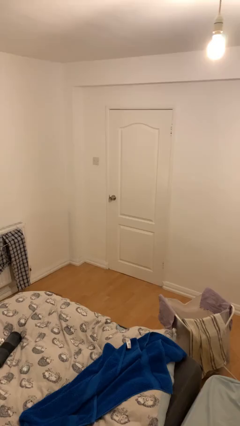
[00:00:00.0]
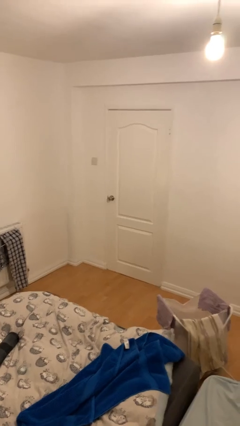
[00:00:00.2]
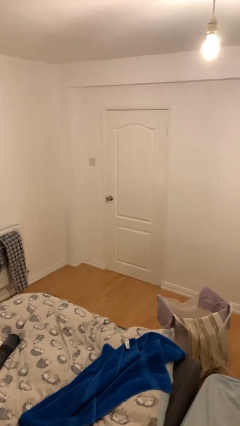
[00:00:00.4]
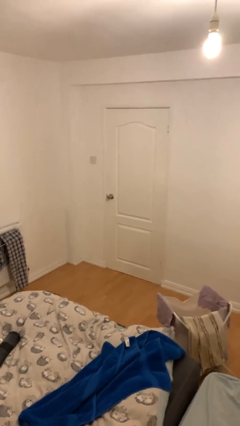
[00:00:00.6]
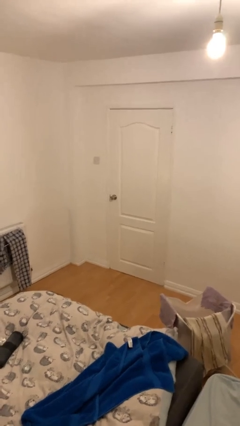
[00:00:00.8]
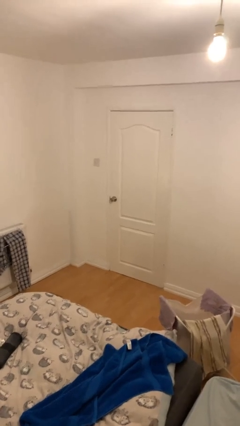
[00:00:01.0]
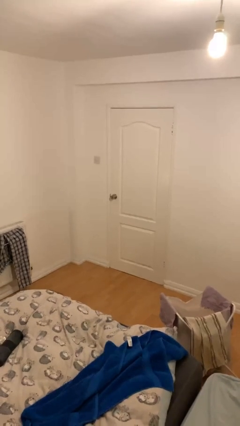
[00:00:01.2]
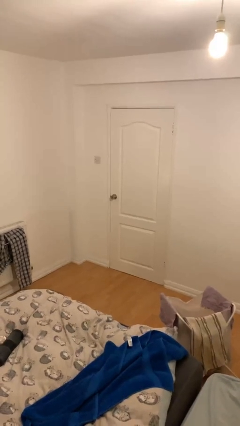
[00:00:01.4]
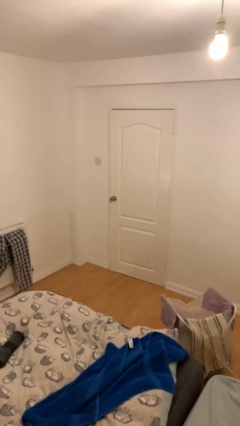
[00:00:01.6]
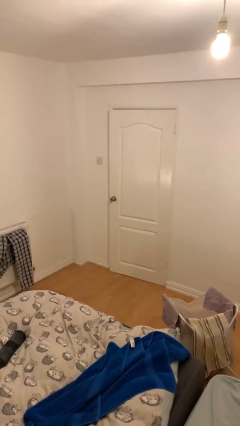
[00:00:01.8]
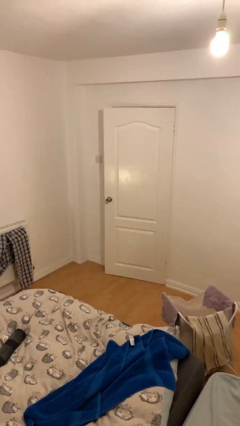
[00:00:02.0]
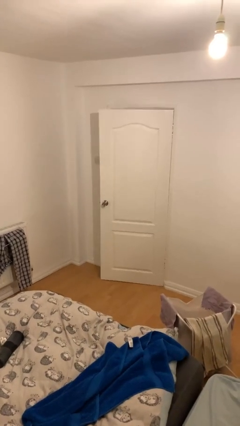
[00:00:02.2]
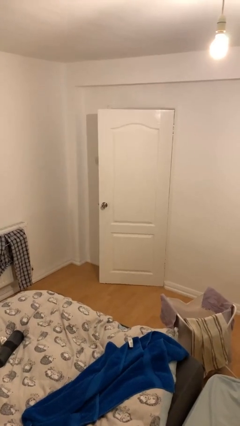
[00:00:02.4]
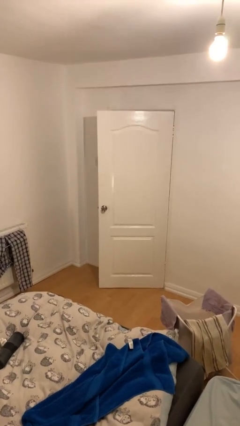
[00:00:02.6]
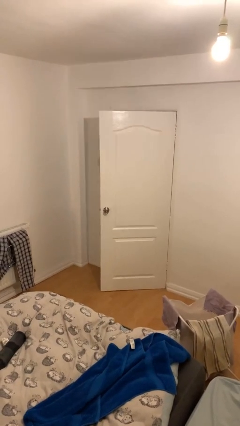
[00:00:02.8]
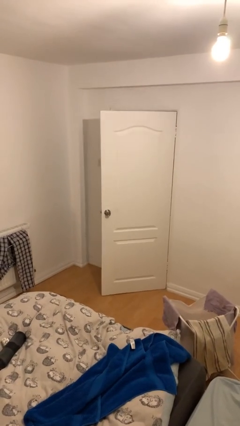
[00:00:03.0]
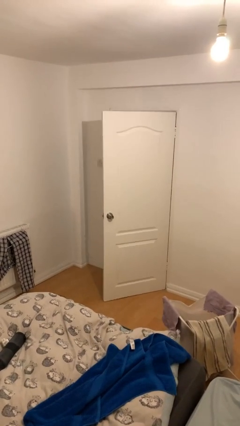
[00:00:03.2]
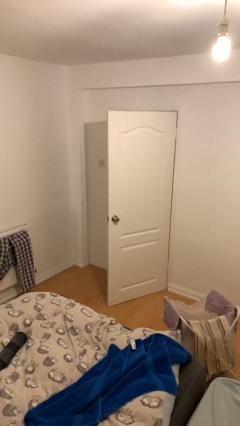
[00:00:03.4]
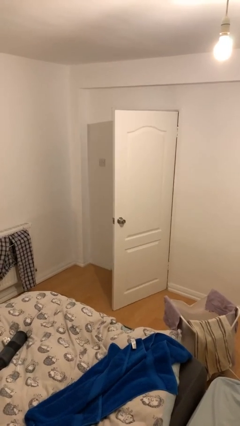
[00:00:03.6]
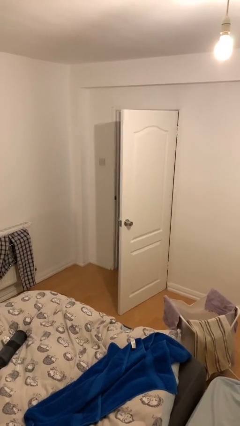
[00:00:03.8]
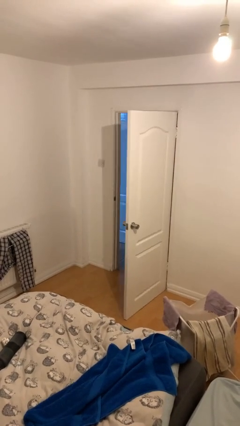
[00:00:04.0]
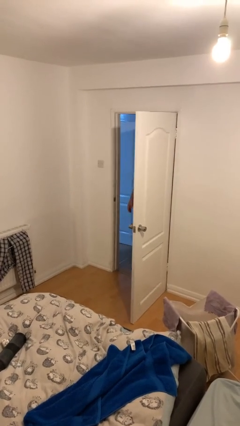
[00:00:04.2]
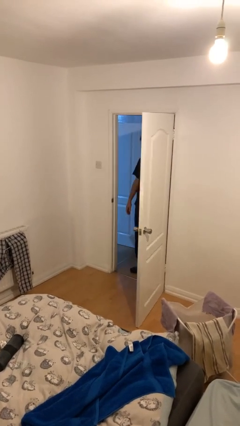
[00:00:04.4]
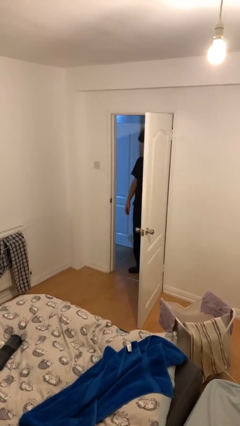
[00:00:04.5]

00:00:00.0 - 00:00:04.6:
person opens facility door

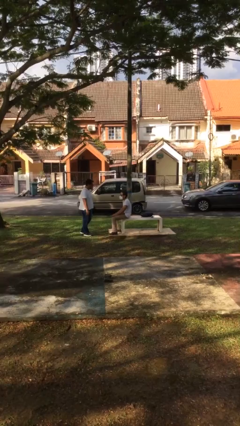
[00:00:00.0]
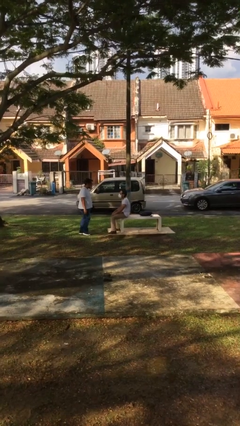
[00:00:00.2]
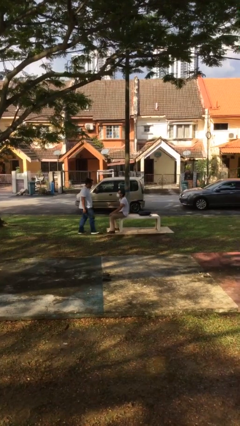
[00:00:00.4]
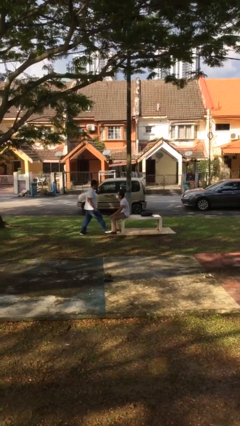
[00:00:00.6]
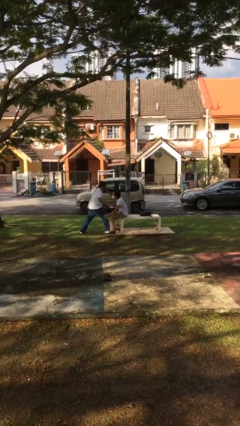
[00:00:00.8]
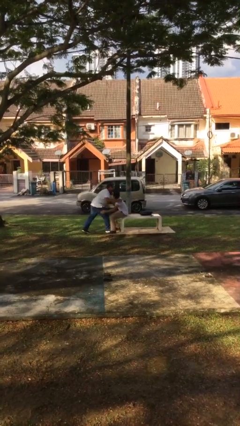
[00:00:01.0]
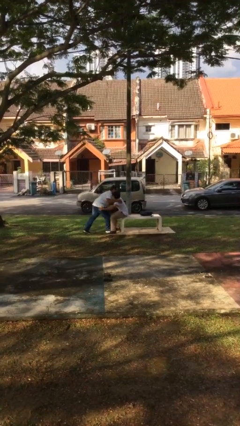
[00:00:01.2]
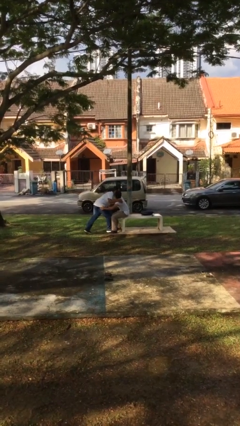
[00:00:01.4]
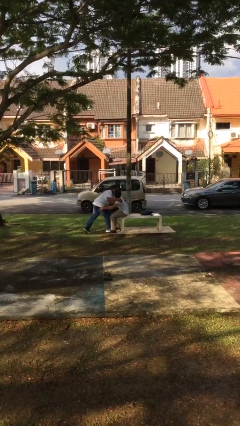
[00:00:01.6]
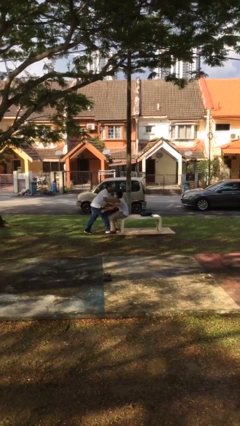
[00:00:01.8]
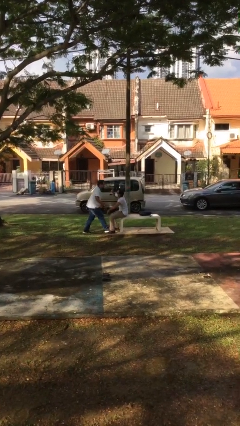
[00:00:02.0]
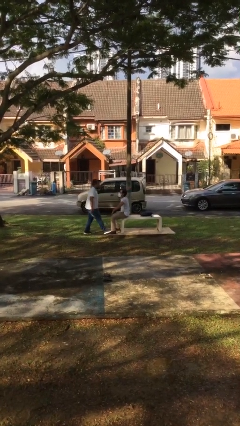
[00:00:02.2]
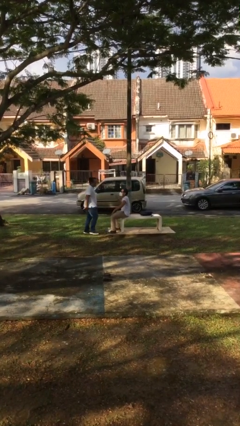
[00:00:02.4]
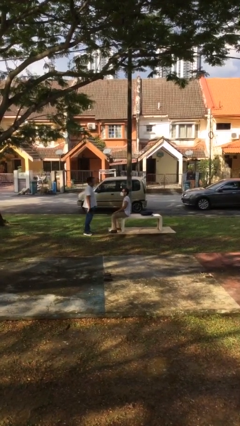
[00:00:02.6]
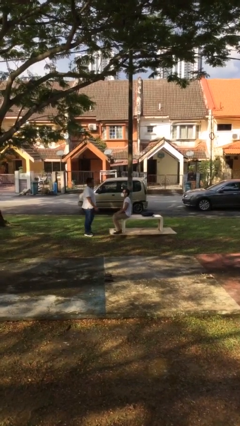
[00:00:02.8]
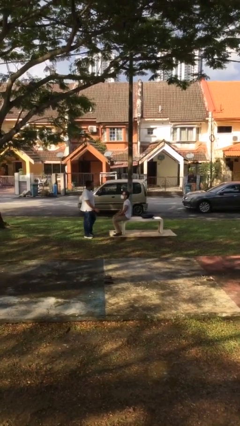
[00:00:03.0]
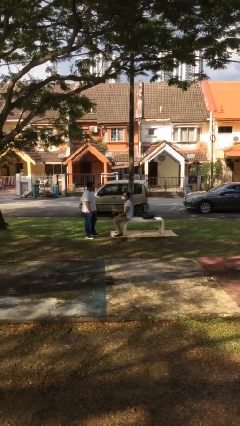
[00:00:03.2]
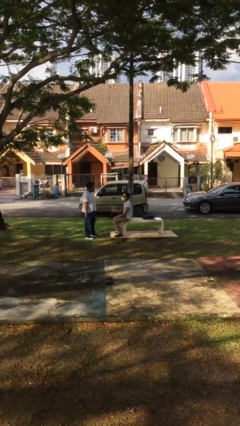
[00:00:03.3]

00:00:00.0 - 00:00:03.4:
person embraces person

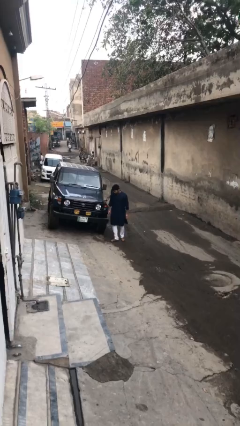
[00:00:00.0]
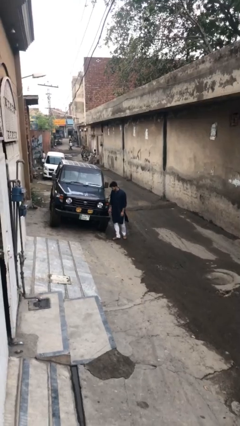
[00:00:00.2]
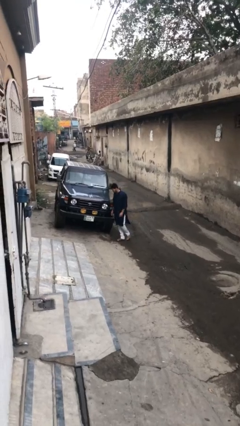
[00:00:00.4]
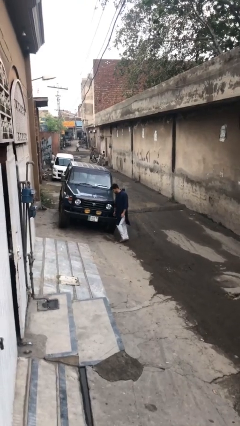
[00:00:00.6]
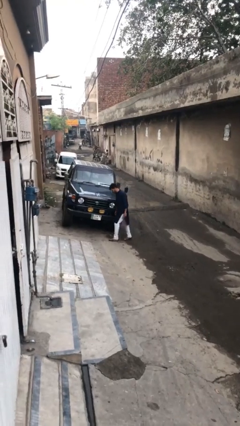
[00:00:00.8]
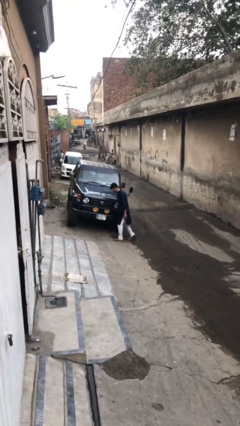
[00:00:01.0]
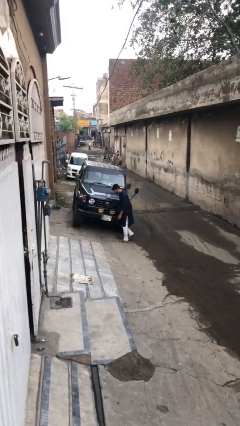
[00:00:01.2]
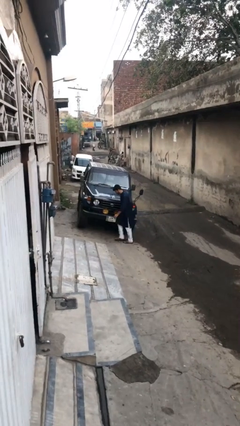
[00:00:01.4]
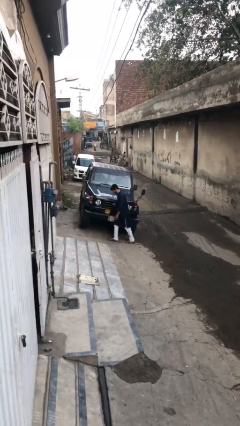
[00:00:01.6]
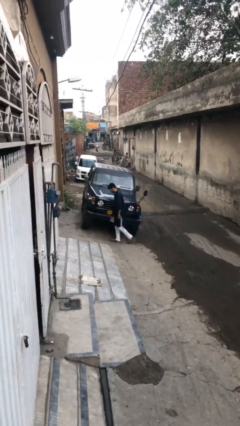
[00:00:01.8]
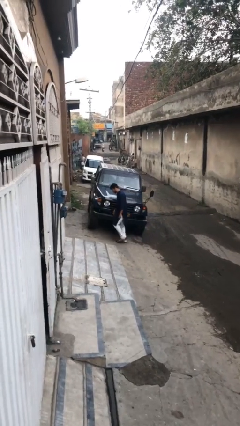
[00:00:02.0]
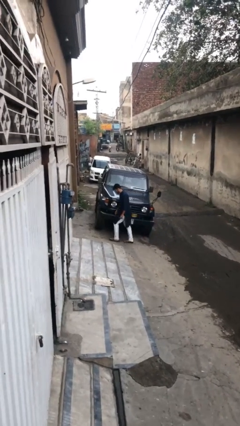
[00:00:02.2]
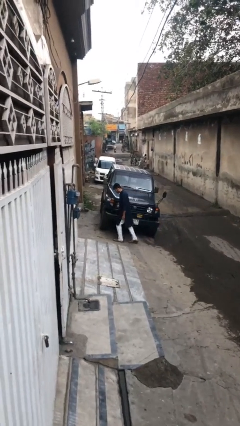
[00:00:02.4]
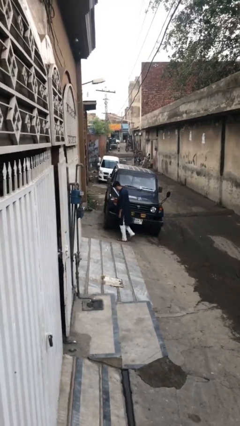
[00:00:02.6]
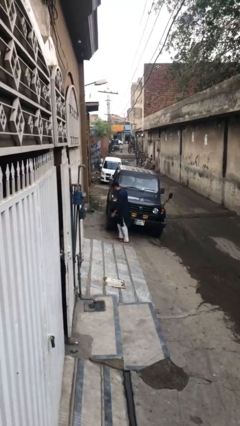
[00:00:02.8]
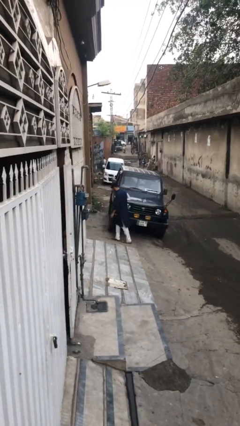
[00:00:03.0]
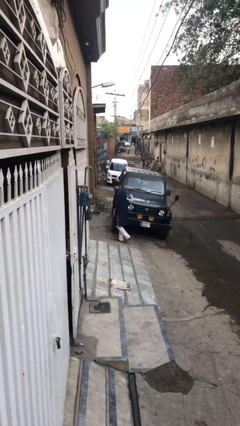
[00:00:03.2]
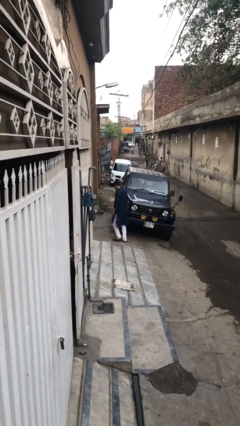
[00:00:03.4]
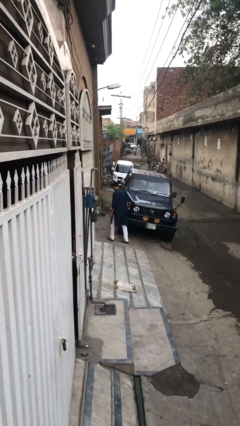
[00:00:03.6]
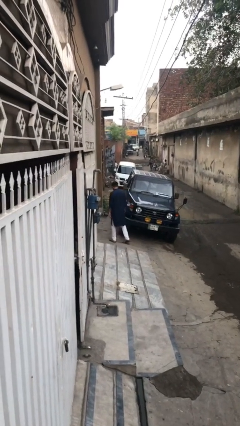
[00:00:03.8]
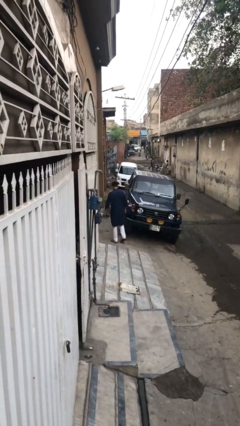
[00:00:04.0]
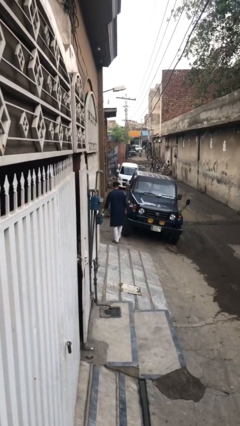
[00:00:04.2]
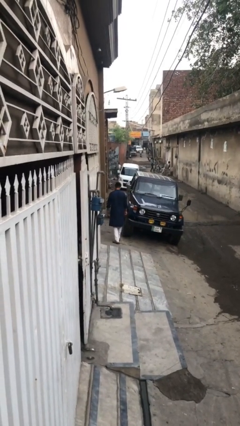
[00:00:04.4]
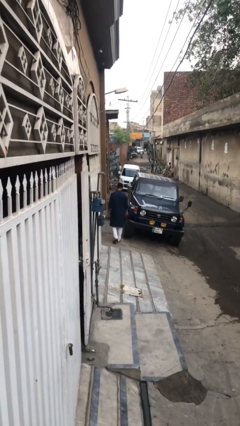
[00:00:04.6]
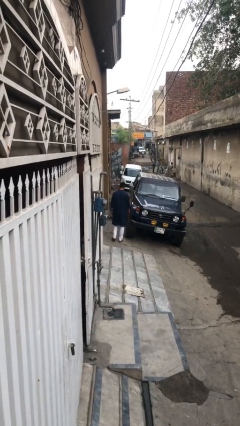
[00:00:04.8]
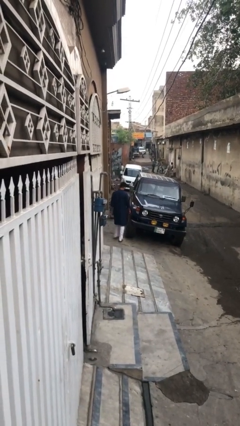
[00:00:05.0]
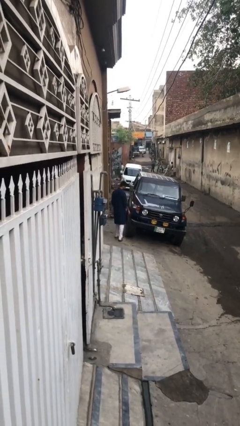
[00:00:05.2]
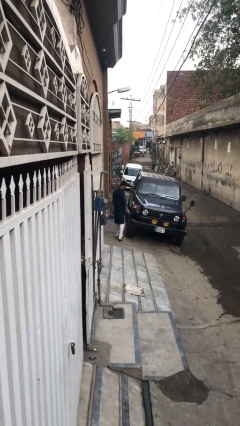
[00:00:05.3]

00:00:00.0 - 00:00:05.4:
person walks around car

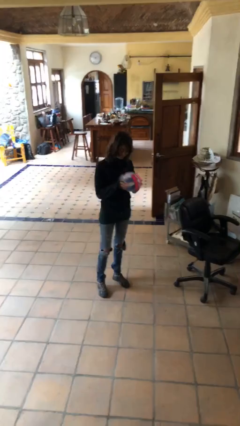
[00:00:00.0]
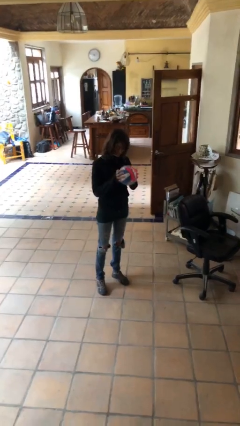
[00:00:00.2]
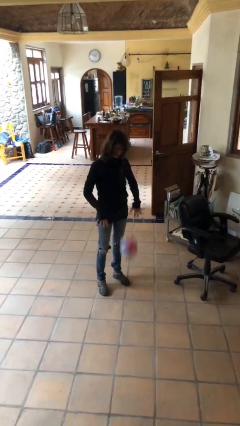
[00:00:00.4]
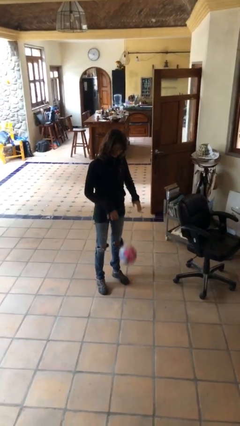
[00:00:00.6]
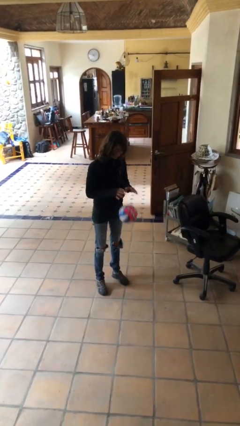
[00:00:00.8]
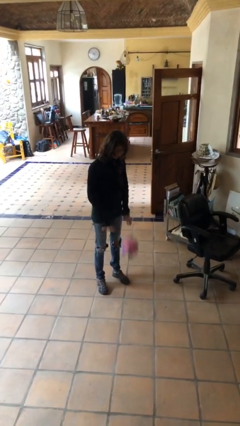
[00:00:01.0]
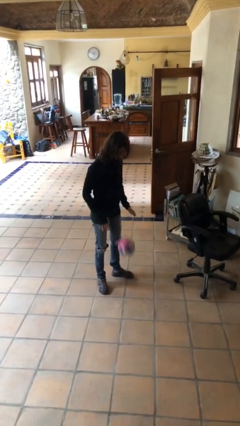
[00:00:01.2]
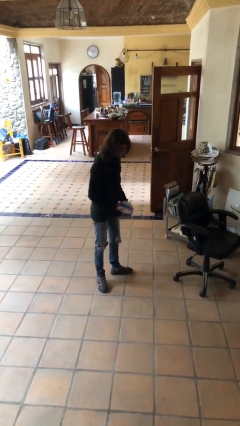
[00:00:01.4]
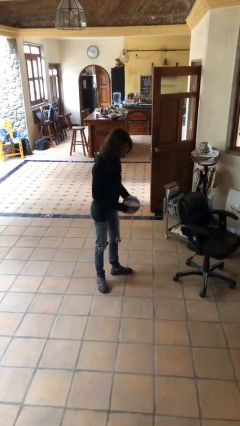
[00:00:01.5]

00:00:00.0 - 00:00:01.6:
person bounces ball on floor

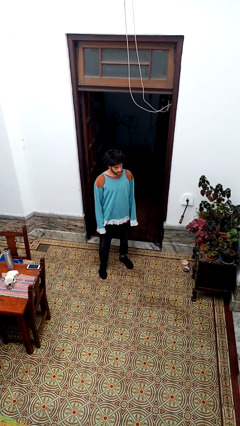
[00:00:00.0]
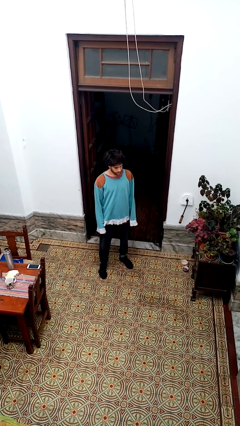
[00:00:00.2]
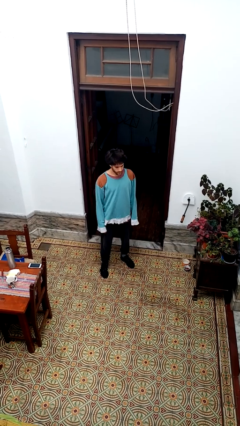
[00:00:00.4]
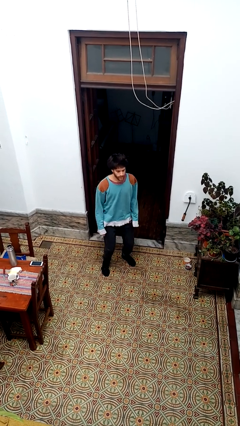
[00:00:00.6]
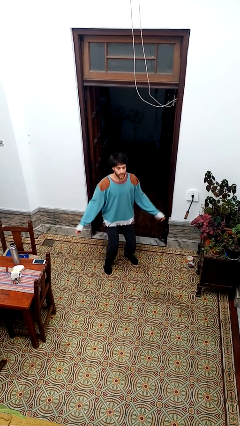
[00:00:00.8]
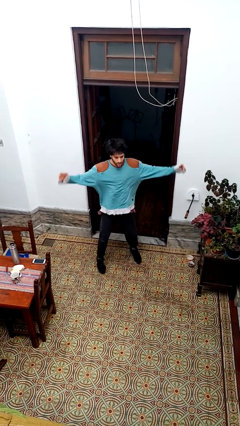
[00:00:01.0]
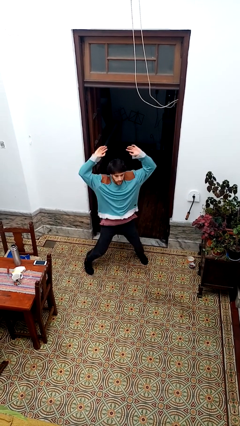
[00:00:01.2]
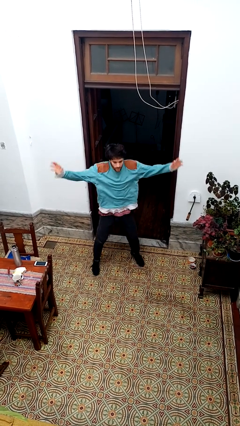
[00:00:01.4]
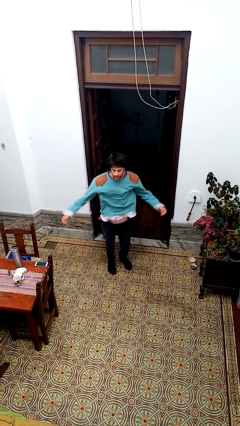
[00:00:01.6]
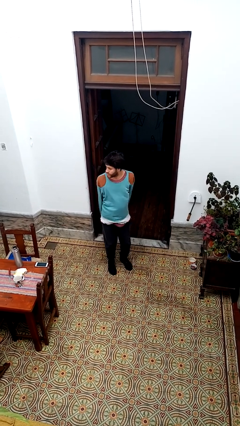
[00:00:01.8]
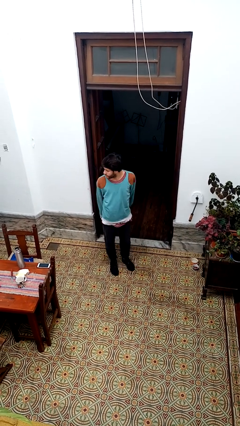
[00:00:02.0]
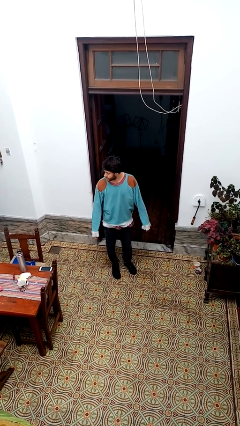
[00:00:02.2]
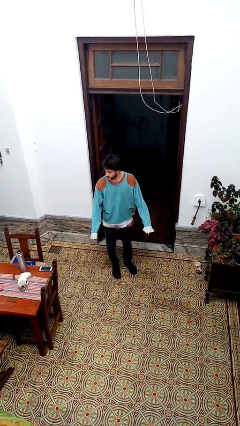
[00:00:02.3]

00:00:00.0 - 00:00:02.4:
person exercises with jumping jacks
